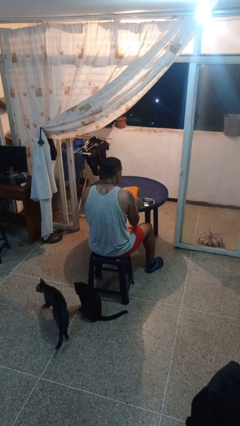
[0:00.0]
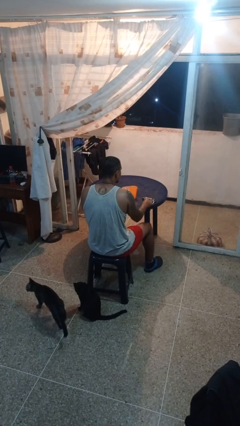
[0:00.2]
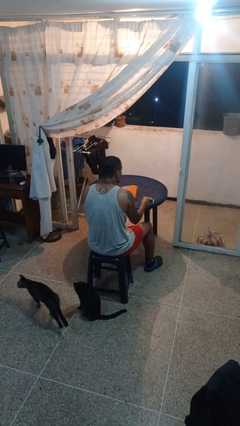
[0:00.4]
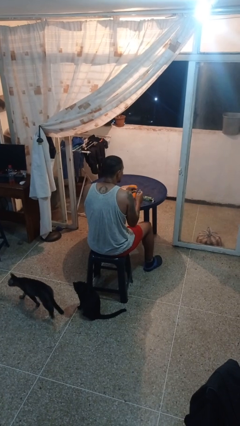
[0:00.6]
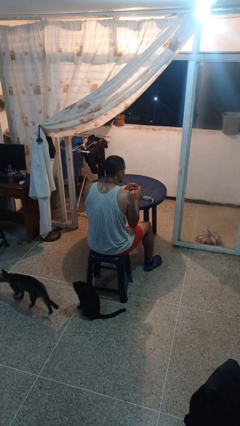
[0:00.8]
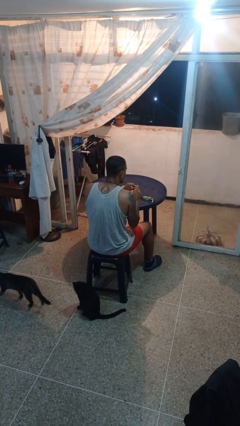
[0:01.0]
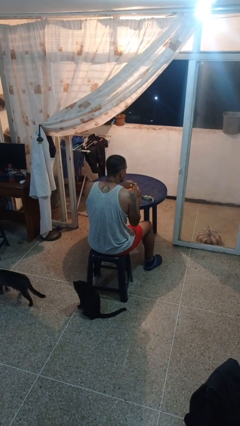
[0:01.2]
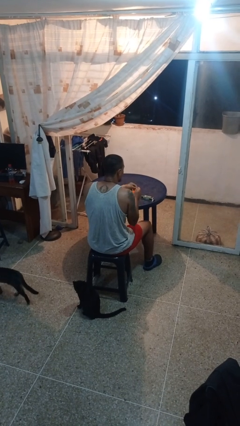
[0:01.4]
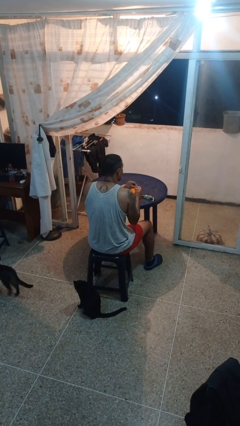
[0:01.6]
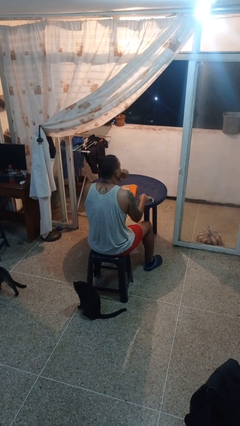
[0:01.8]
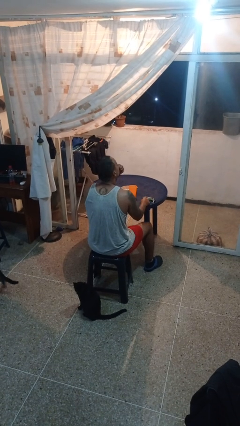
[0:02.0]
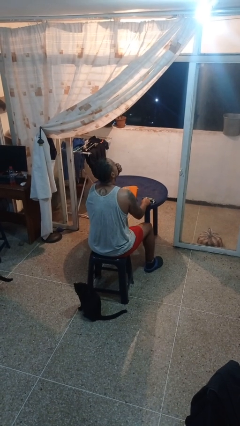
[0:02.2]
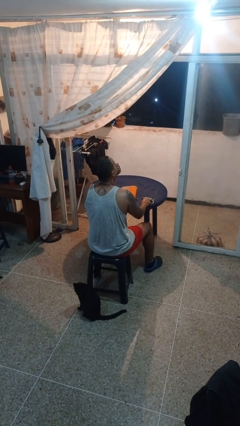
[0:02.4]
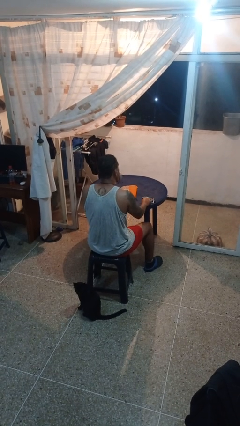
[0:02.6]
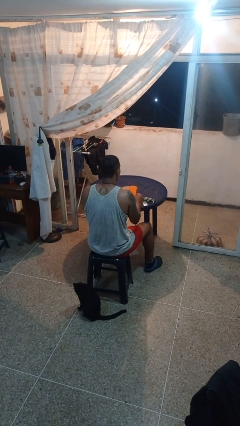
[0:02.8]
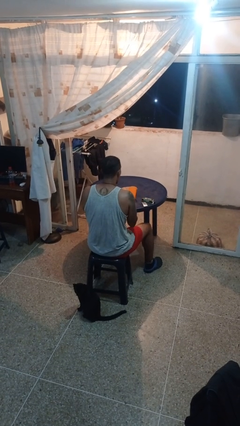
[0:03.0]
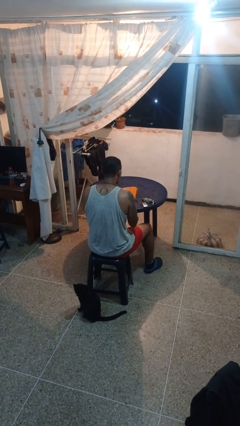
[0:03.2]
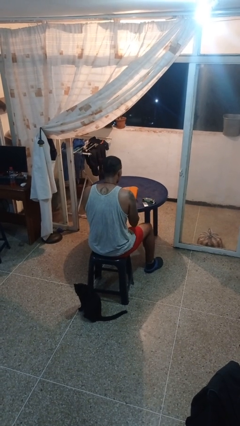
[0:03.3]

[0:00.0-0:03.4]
person takes medicine pills

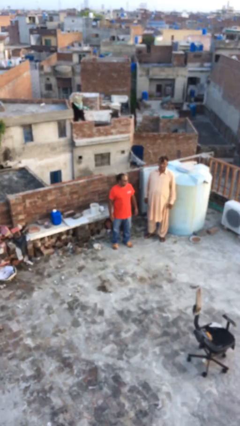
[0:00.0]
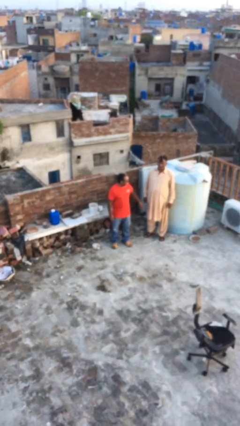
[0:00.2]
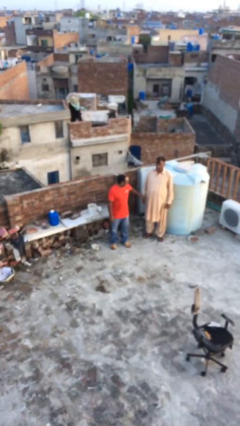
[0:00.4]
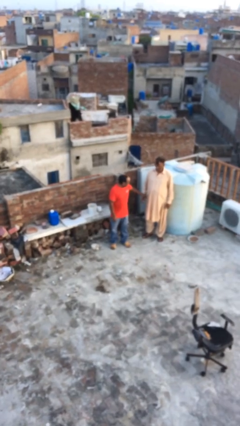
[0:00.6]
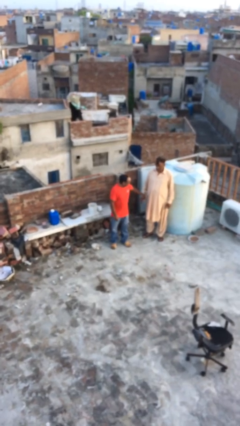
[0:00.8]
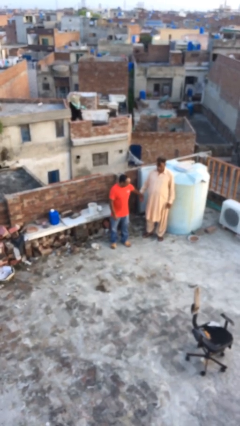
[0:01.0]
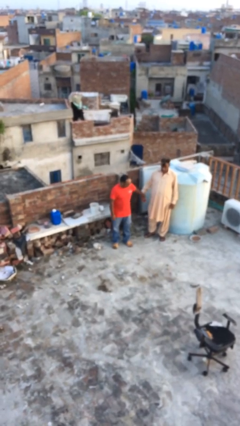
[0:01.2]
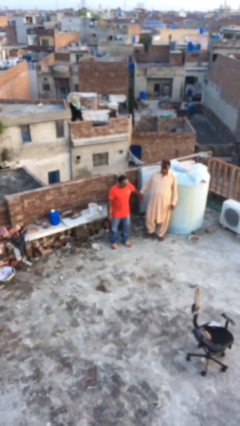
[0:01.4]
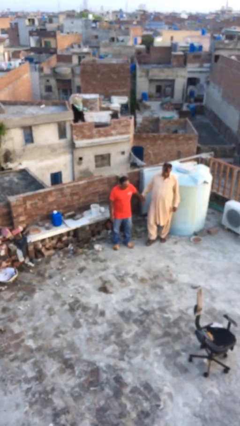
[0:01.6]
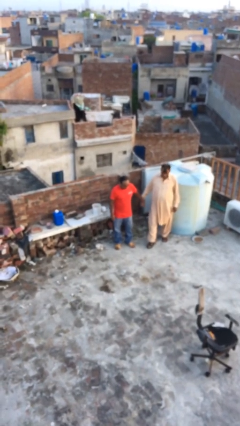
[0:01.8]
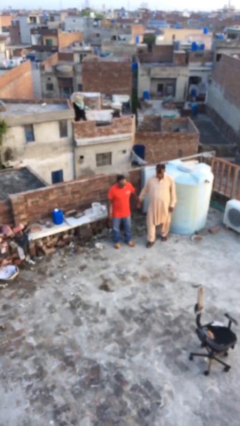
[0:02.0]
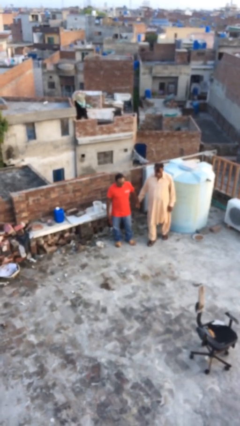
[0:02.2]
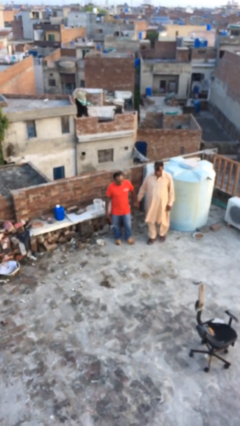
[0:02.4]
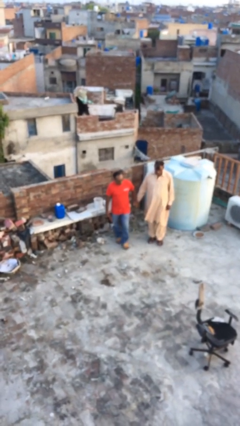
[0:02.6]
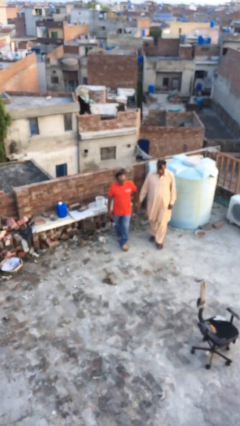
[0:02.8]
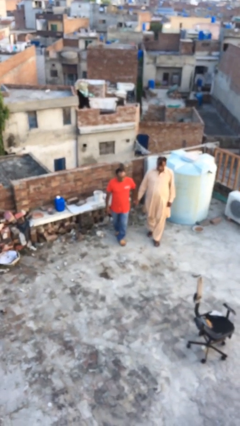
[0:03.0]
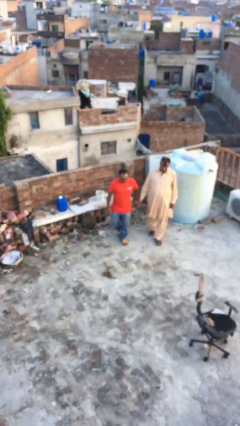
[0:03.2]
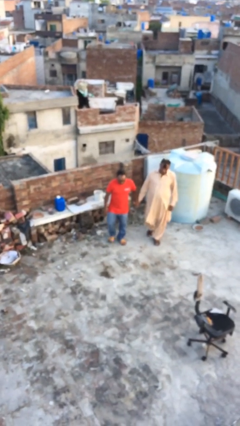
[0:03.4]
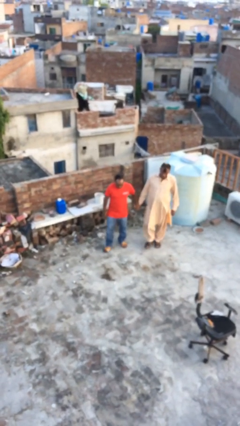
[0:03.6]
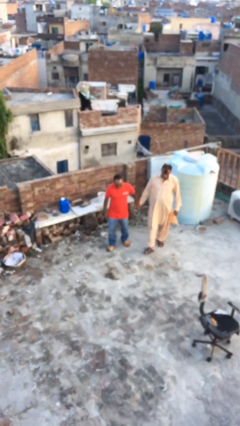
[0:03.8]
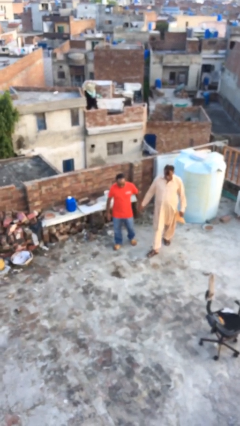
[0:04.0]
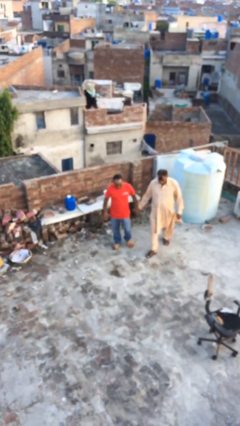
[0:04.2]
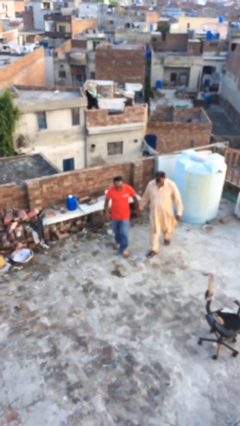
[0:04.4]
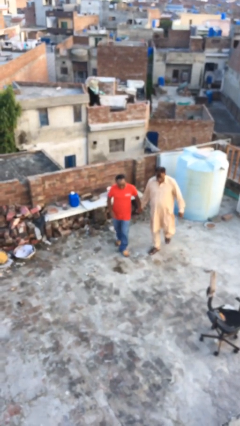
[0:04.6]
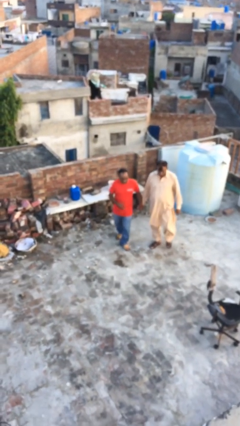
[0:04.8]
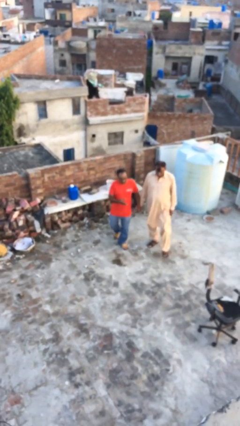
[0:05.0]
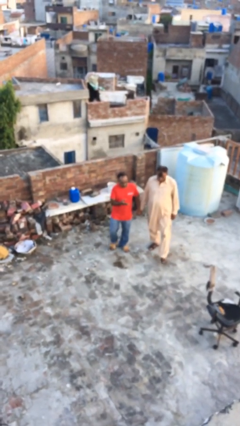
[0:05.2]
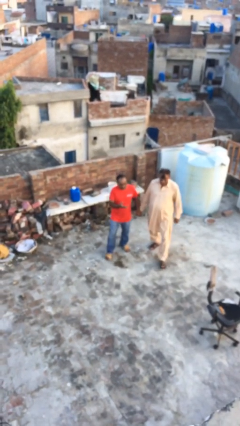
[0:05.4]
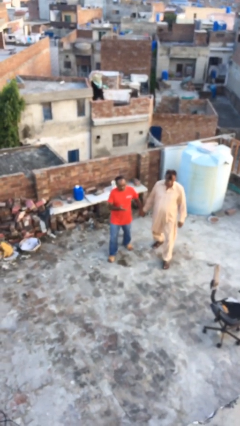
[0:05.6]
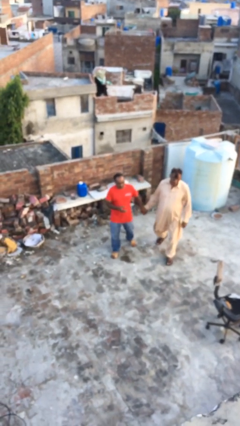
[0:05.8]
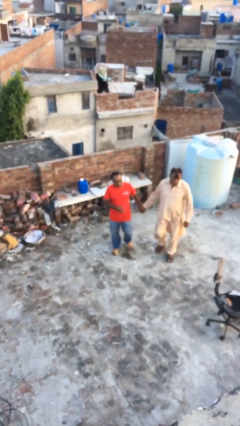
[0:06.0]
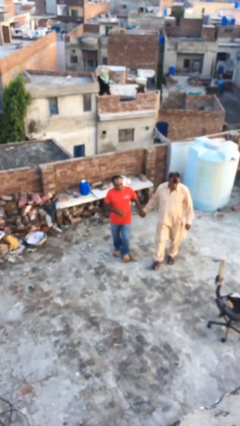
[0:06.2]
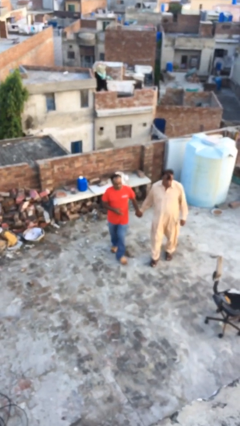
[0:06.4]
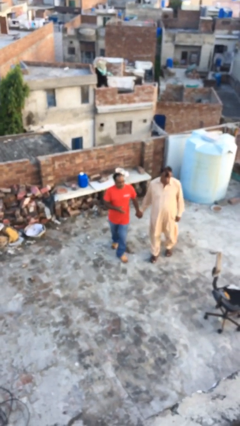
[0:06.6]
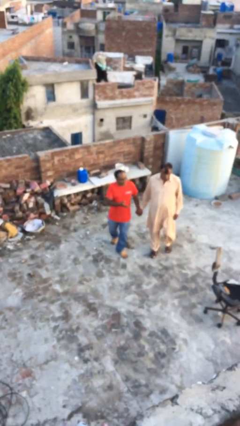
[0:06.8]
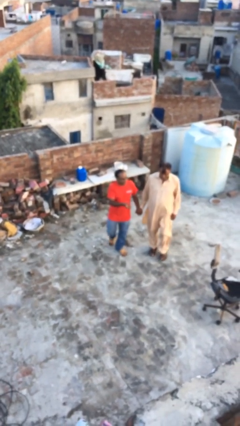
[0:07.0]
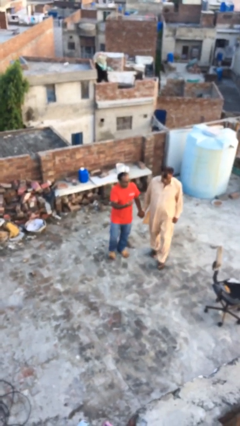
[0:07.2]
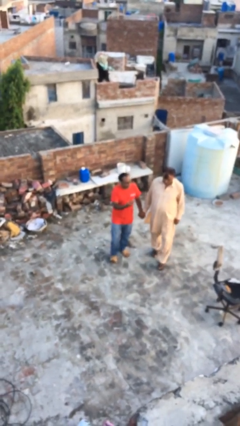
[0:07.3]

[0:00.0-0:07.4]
person holds hand

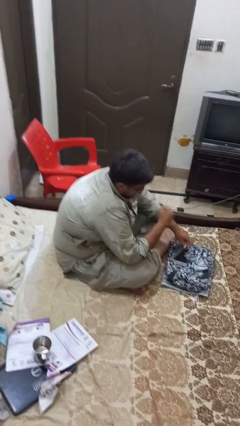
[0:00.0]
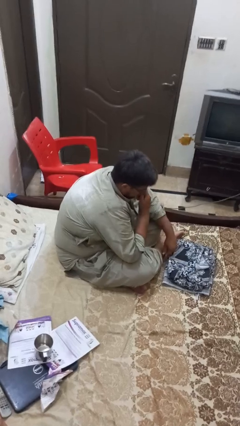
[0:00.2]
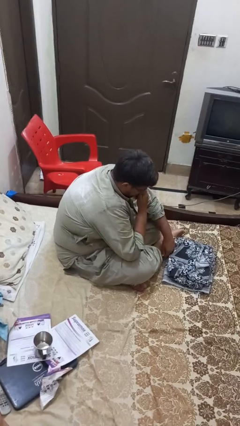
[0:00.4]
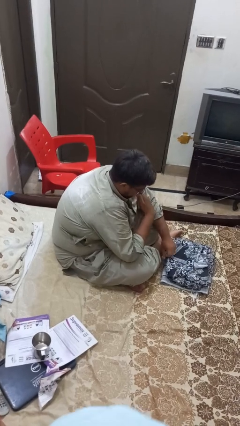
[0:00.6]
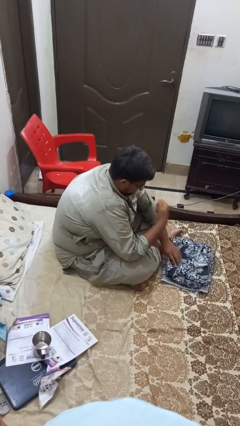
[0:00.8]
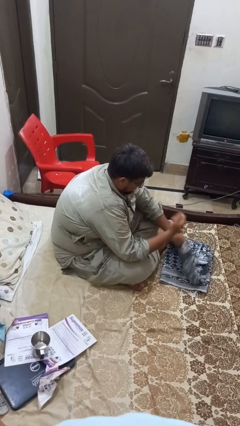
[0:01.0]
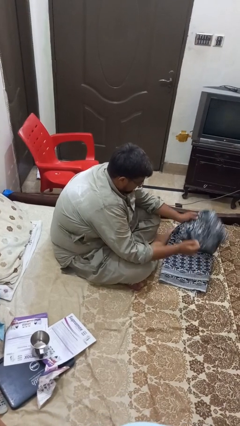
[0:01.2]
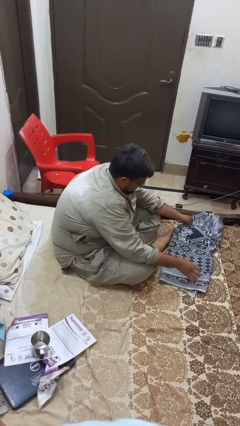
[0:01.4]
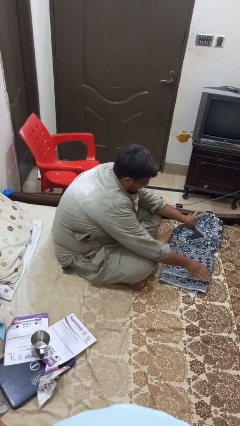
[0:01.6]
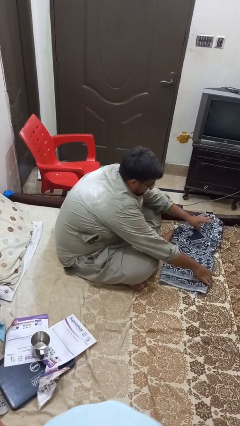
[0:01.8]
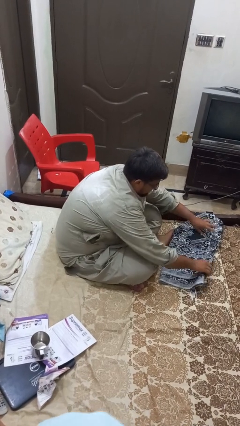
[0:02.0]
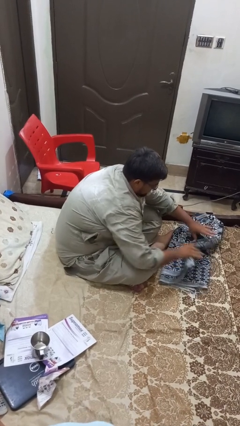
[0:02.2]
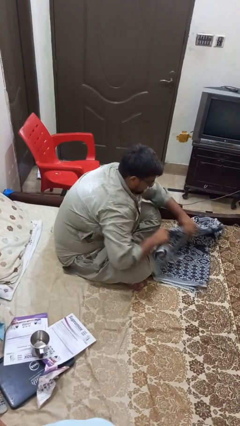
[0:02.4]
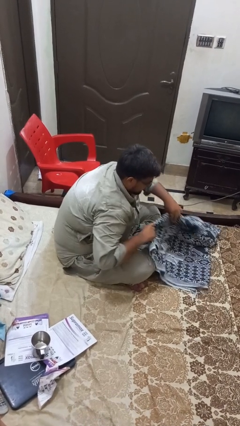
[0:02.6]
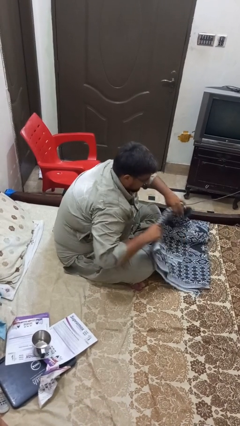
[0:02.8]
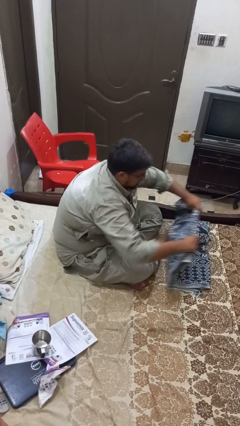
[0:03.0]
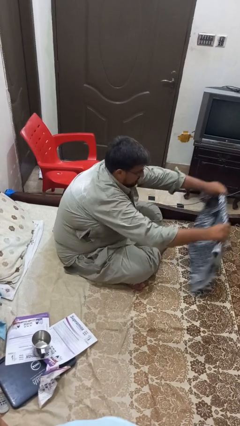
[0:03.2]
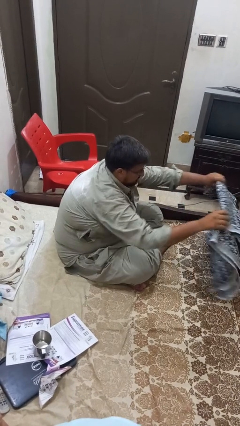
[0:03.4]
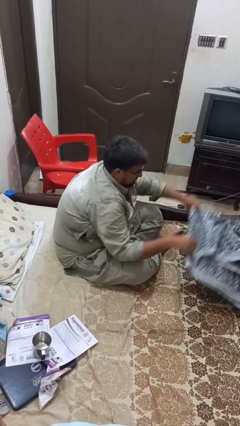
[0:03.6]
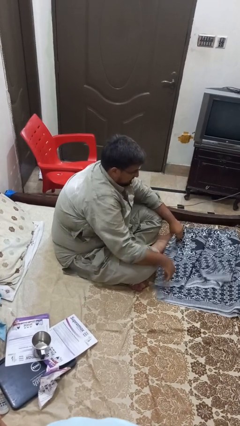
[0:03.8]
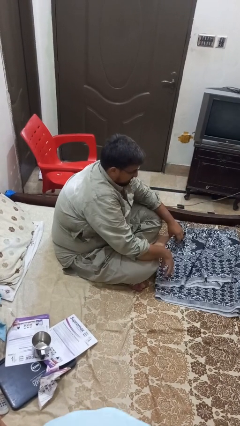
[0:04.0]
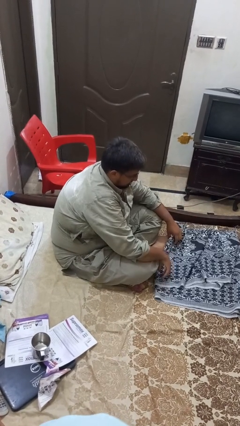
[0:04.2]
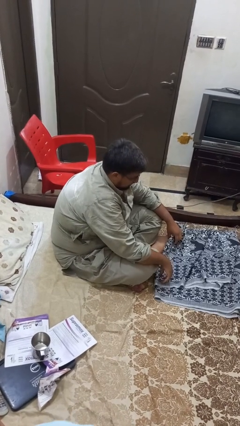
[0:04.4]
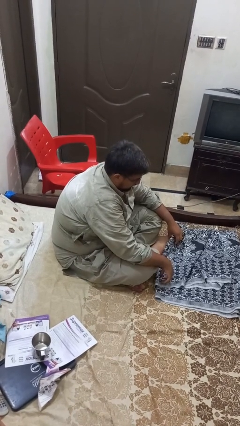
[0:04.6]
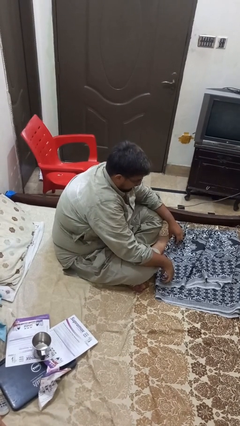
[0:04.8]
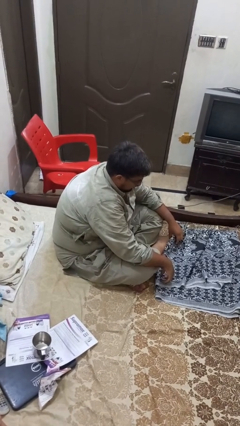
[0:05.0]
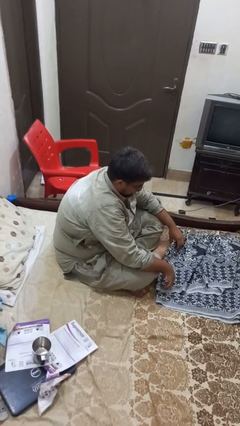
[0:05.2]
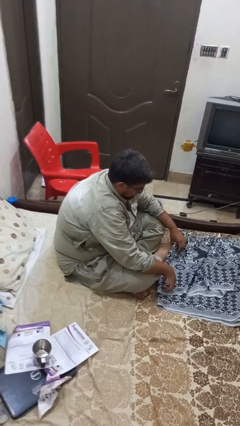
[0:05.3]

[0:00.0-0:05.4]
person unfolds blanket

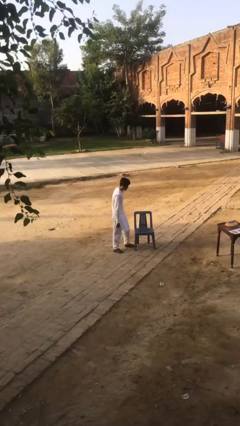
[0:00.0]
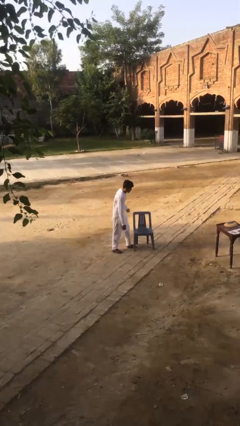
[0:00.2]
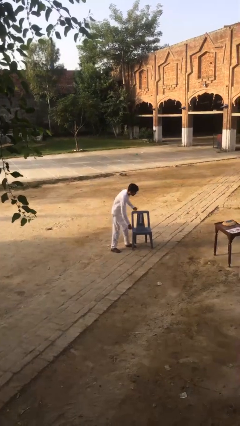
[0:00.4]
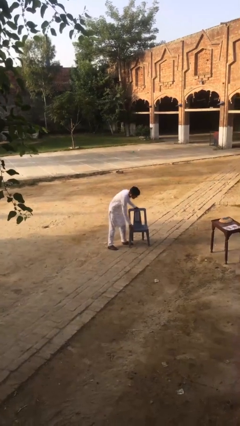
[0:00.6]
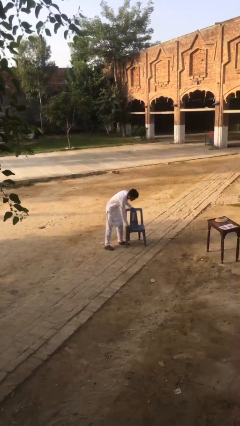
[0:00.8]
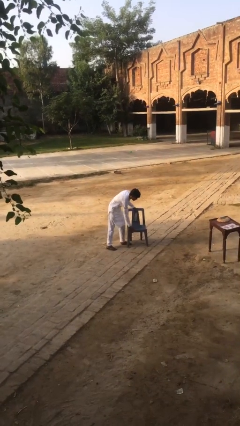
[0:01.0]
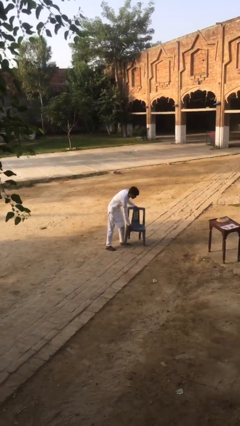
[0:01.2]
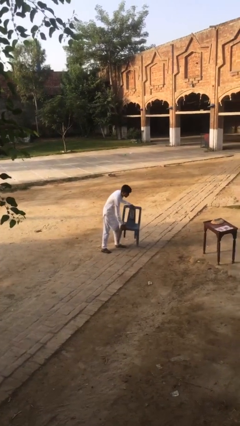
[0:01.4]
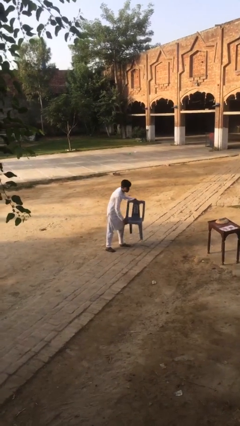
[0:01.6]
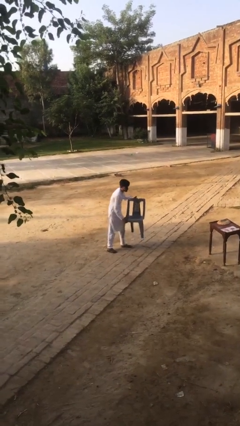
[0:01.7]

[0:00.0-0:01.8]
person picks up object from floor
